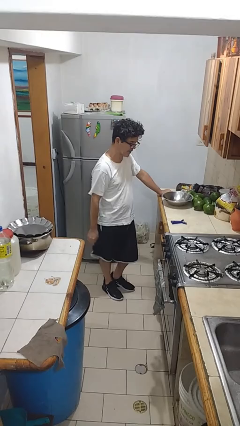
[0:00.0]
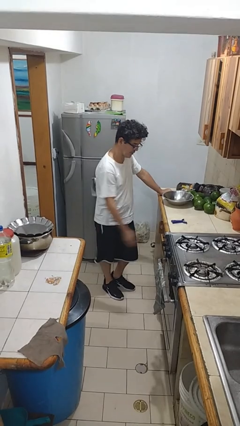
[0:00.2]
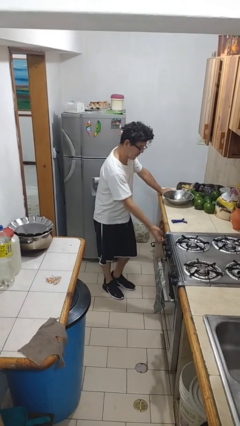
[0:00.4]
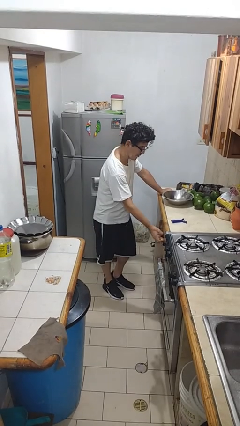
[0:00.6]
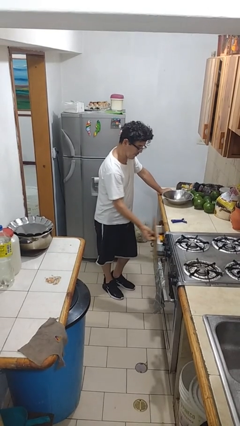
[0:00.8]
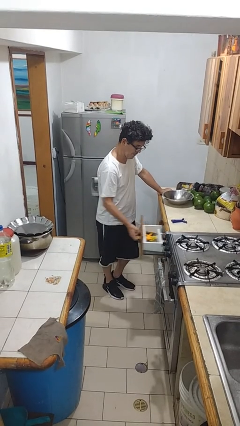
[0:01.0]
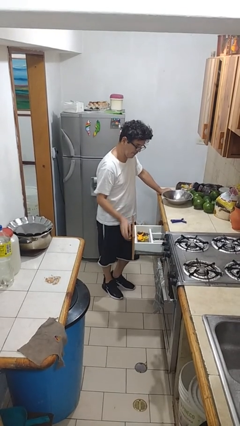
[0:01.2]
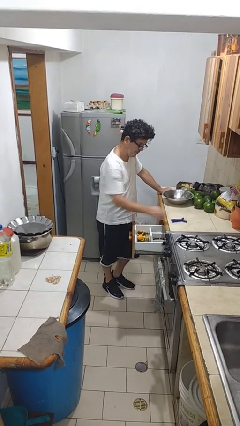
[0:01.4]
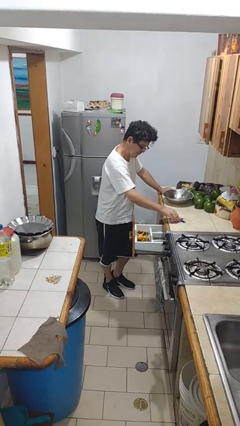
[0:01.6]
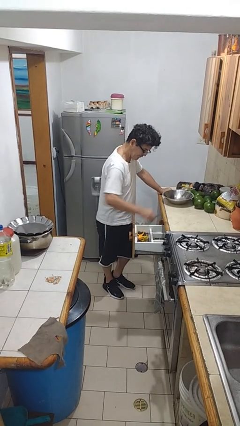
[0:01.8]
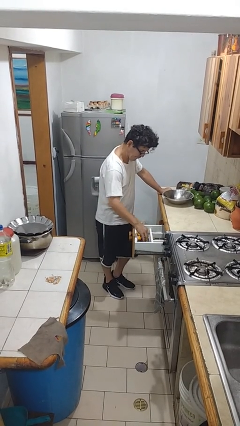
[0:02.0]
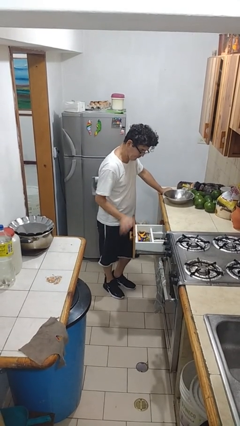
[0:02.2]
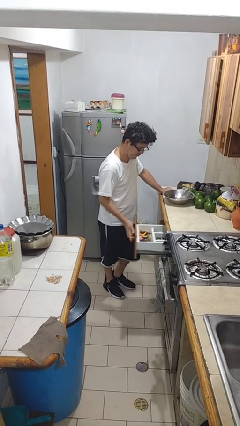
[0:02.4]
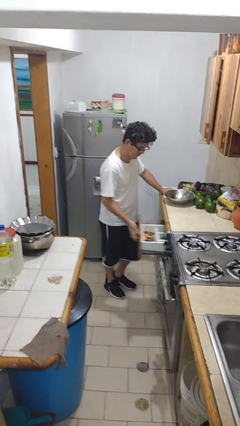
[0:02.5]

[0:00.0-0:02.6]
person puts object into kitchen drawer

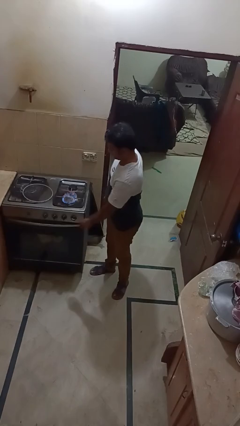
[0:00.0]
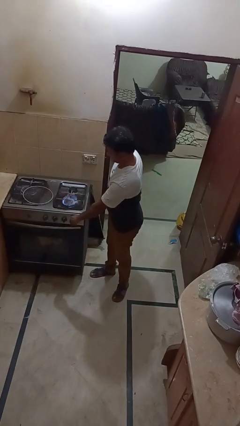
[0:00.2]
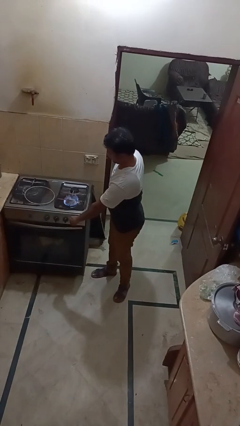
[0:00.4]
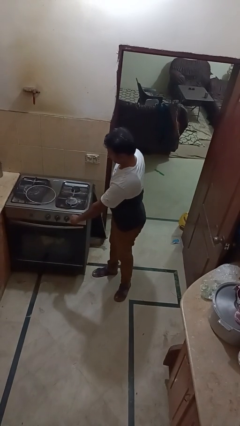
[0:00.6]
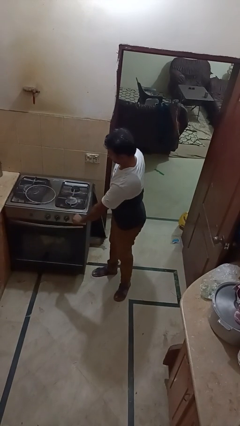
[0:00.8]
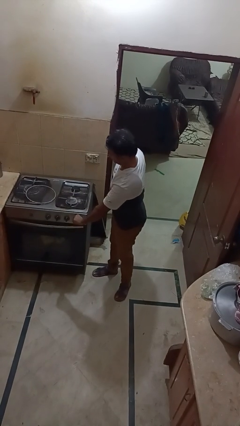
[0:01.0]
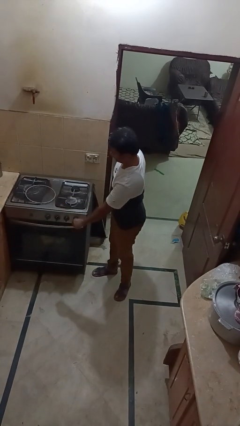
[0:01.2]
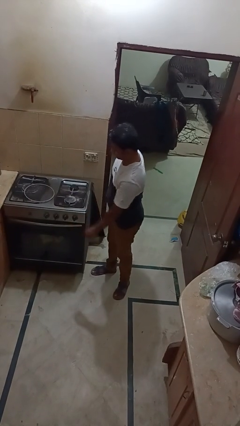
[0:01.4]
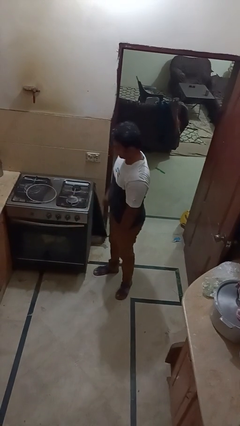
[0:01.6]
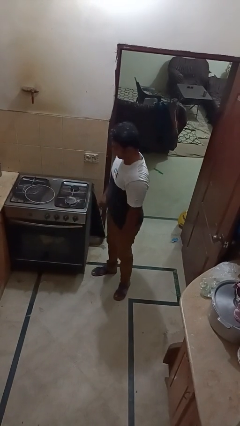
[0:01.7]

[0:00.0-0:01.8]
person turns off stovetop

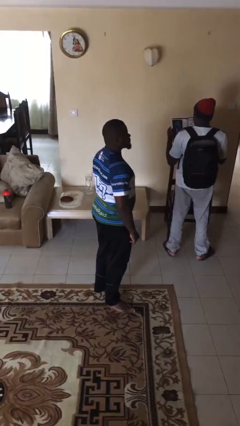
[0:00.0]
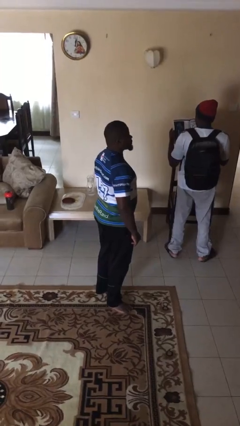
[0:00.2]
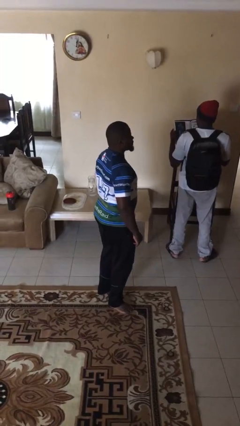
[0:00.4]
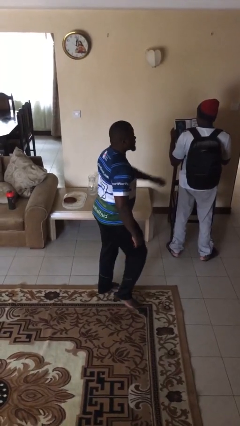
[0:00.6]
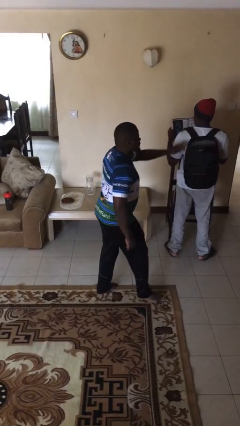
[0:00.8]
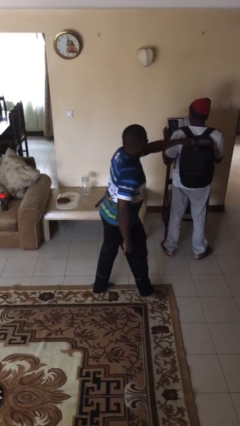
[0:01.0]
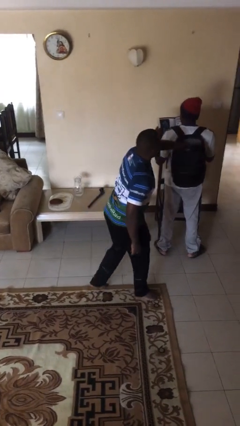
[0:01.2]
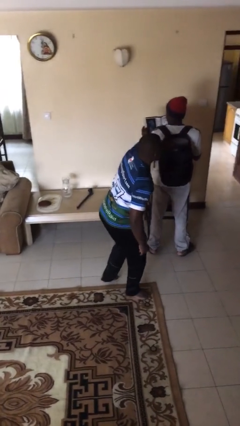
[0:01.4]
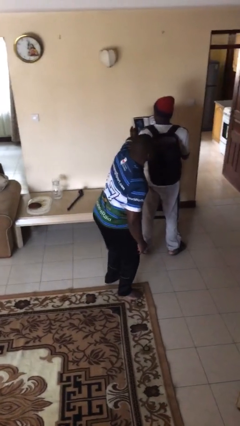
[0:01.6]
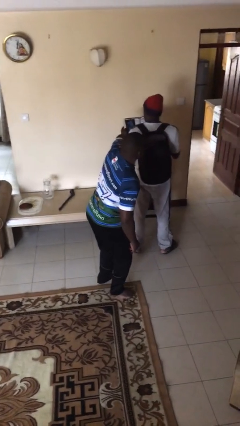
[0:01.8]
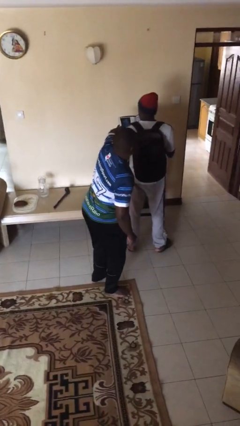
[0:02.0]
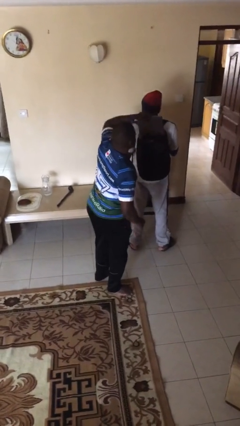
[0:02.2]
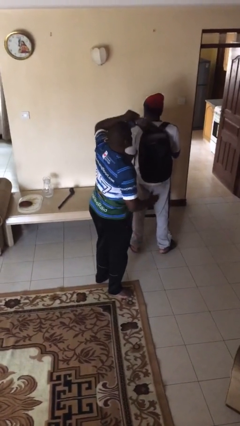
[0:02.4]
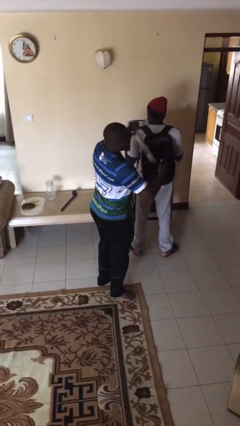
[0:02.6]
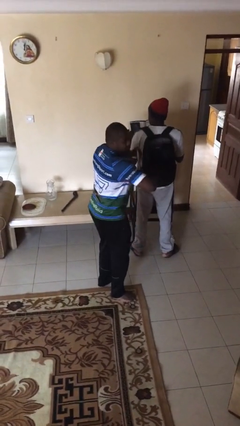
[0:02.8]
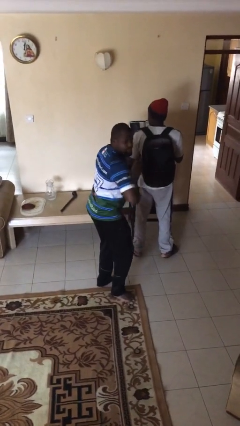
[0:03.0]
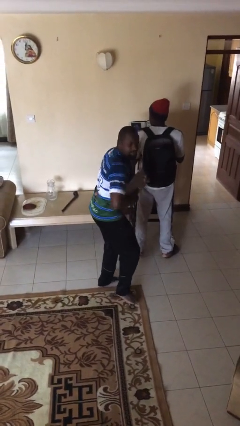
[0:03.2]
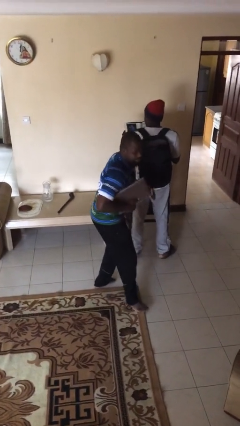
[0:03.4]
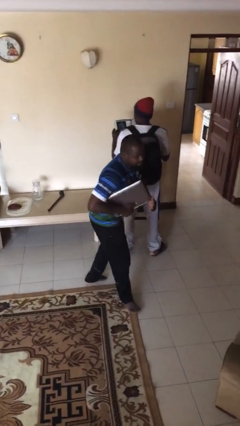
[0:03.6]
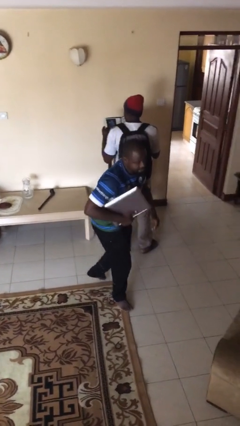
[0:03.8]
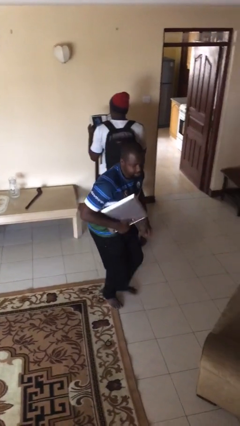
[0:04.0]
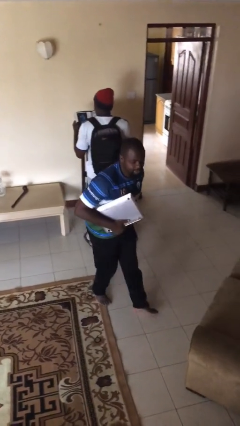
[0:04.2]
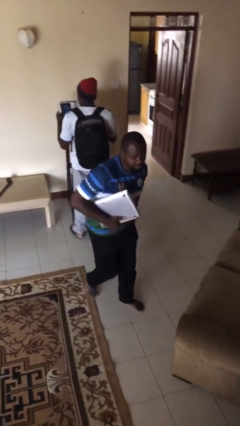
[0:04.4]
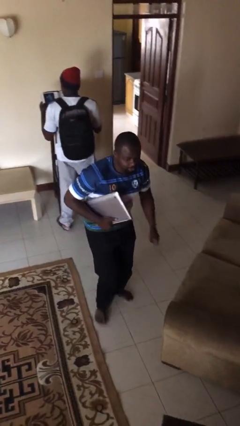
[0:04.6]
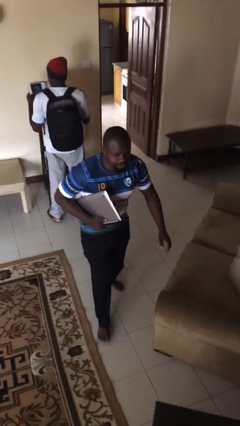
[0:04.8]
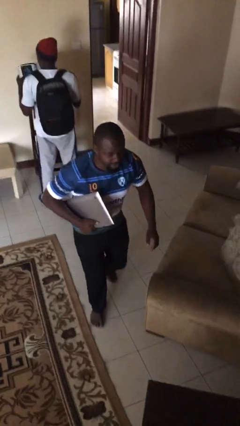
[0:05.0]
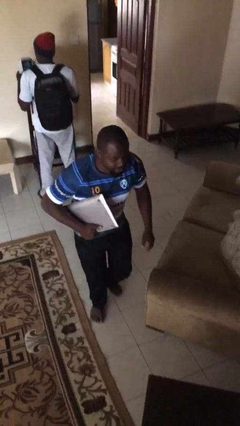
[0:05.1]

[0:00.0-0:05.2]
person steals object from person

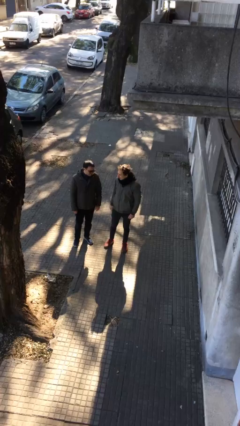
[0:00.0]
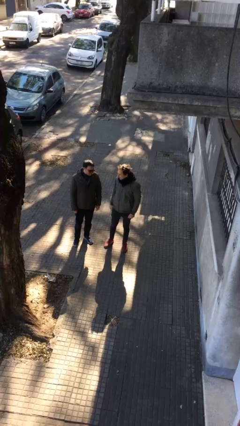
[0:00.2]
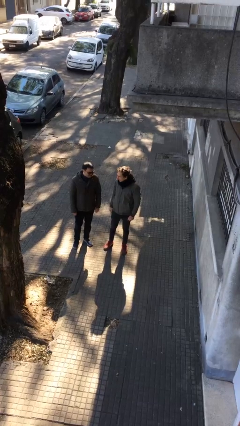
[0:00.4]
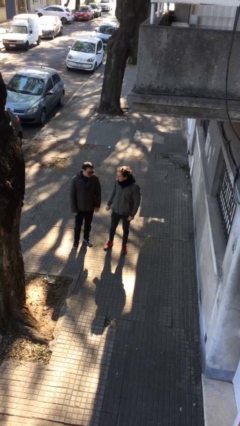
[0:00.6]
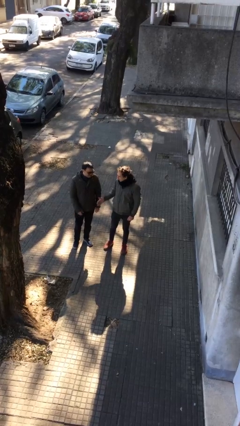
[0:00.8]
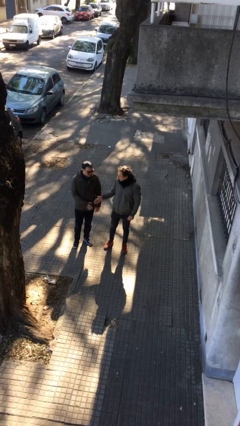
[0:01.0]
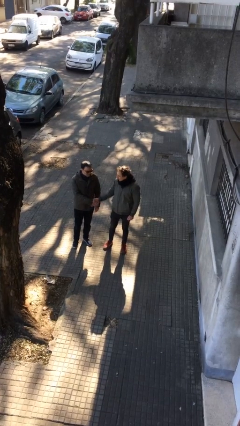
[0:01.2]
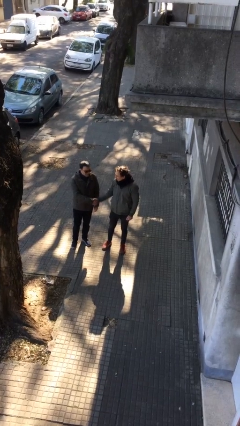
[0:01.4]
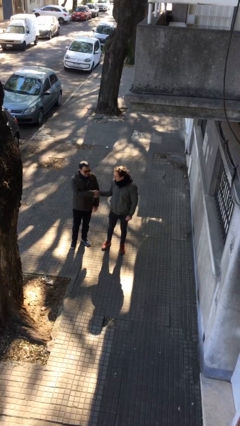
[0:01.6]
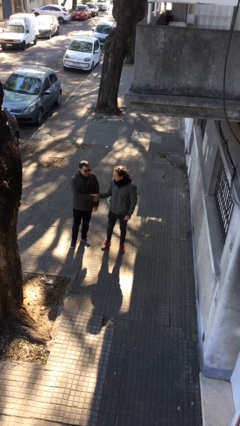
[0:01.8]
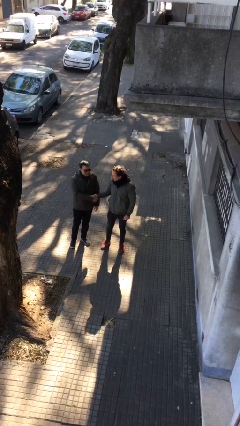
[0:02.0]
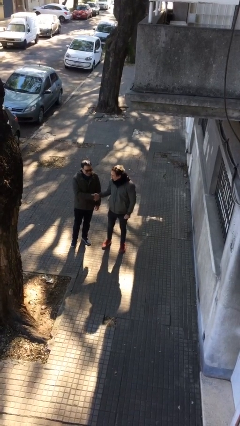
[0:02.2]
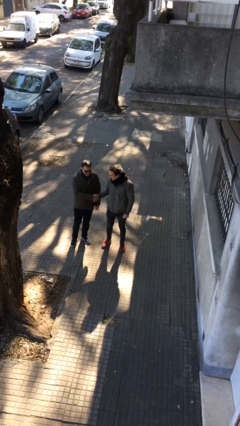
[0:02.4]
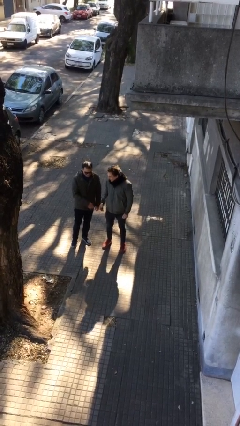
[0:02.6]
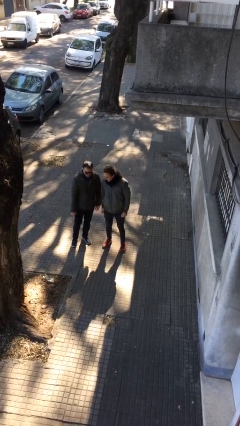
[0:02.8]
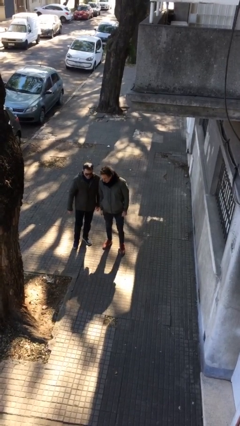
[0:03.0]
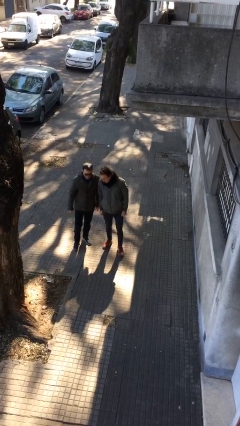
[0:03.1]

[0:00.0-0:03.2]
person shakes hand

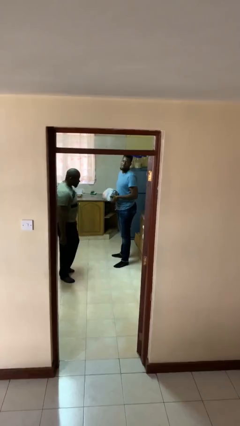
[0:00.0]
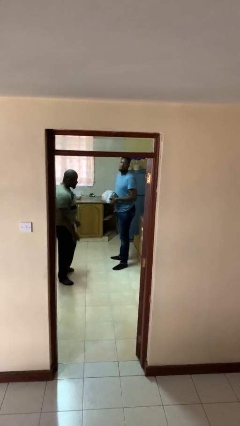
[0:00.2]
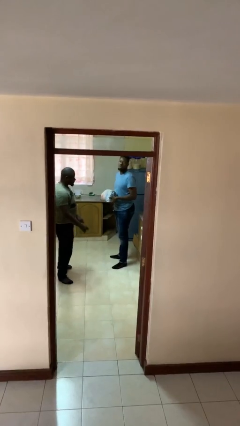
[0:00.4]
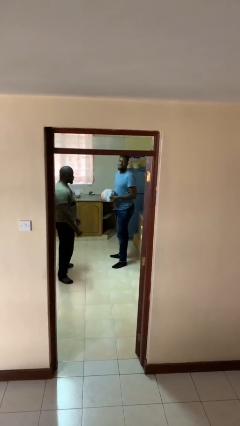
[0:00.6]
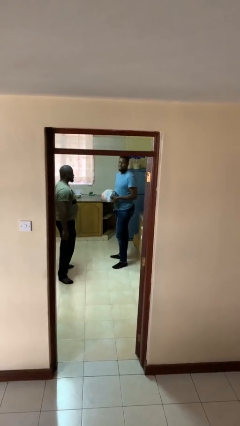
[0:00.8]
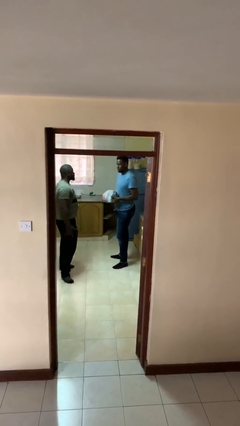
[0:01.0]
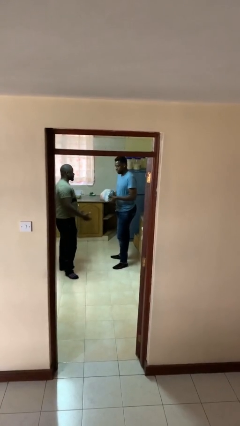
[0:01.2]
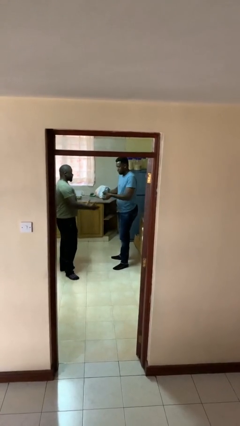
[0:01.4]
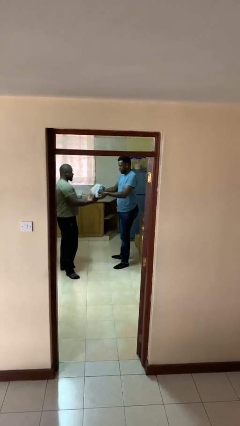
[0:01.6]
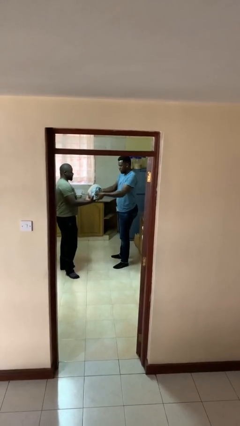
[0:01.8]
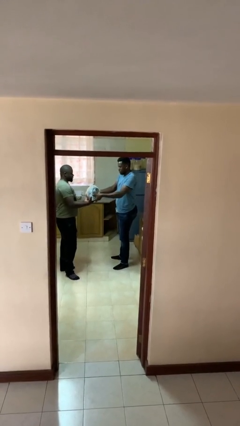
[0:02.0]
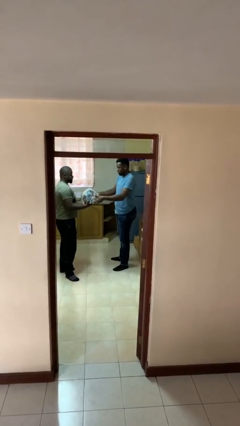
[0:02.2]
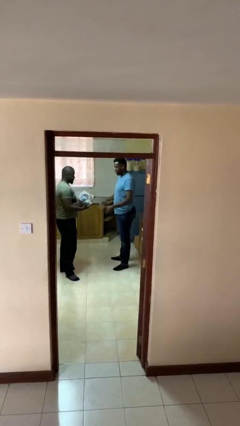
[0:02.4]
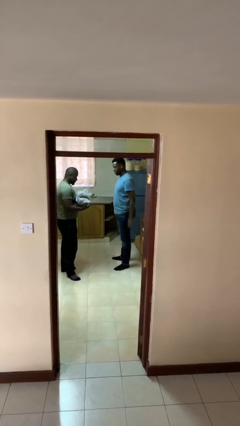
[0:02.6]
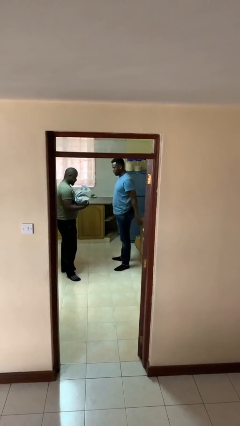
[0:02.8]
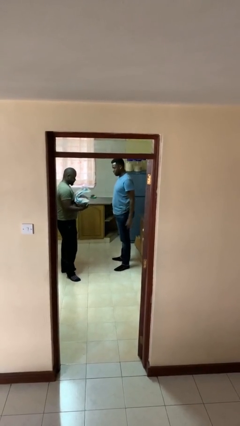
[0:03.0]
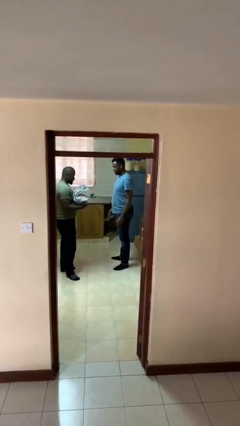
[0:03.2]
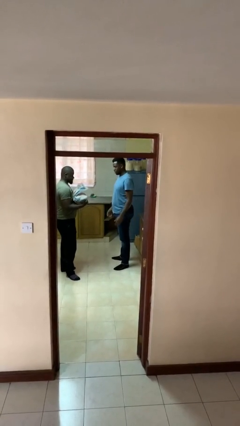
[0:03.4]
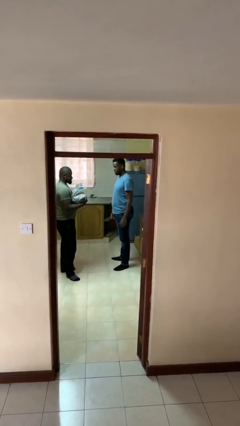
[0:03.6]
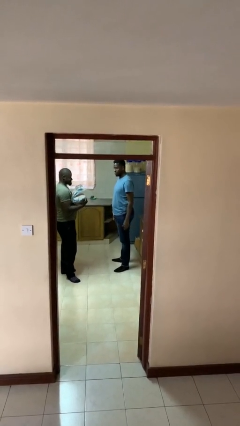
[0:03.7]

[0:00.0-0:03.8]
person transfers object to person

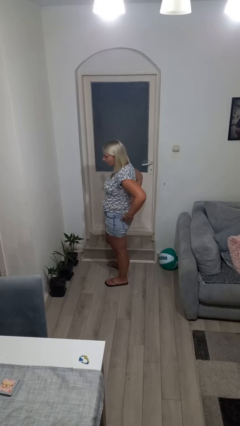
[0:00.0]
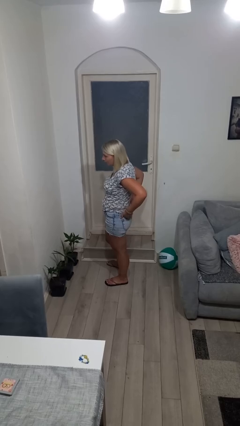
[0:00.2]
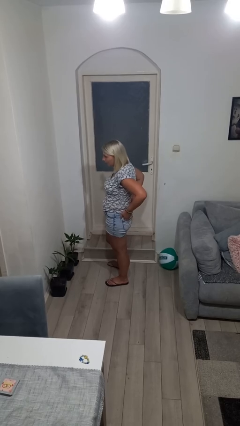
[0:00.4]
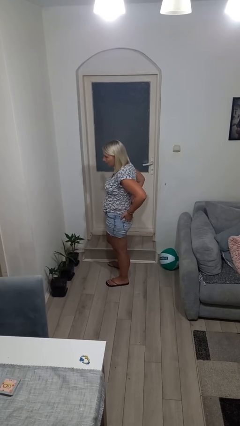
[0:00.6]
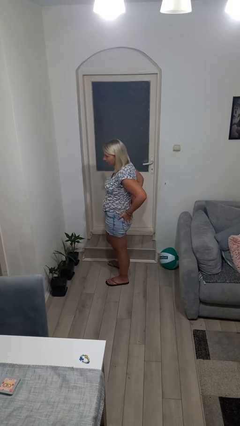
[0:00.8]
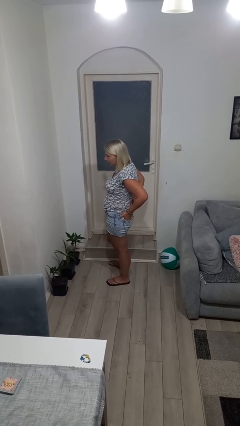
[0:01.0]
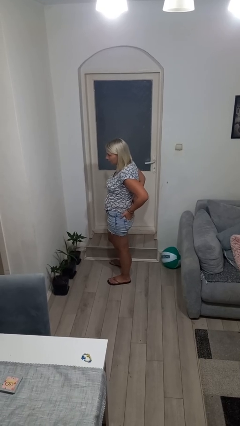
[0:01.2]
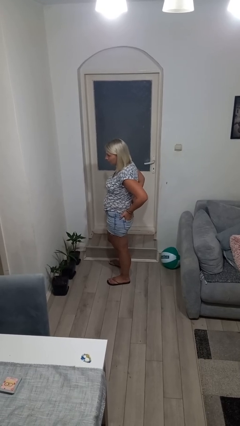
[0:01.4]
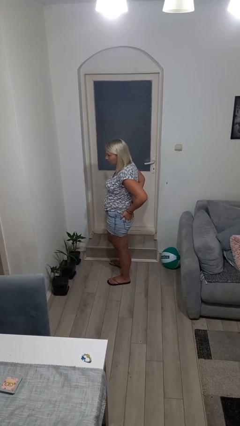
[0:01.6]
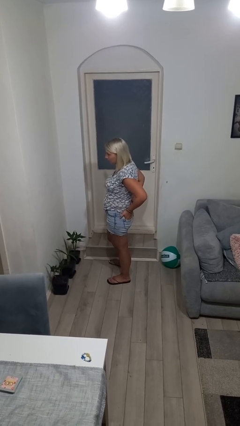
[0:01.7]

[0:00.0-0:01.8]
person puts hands in back pockets
